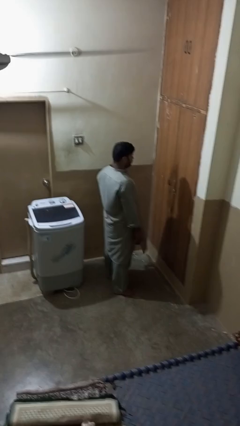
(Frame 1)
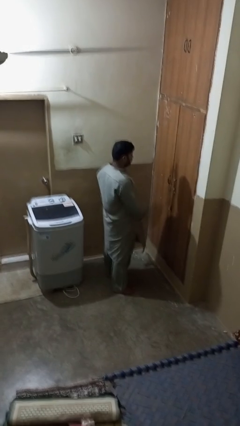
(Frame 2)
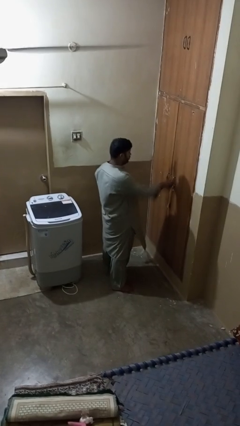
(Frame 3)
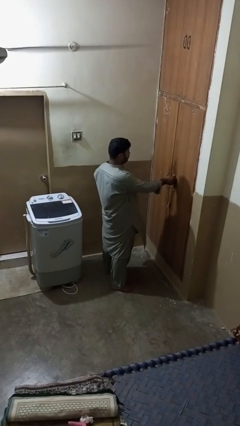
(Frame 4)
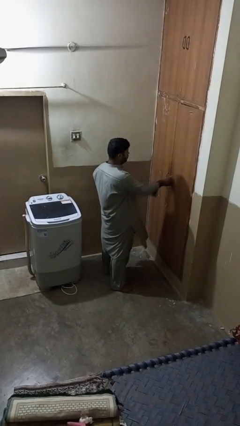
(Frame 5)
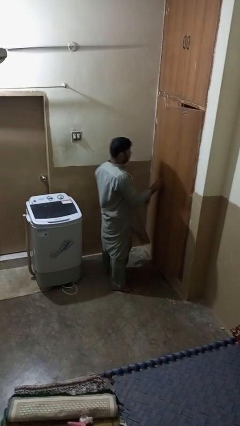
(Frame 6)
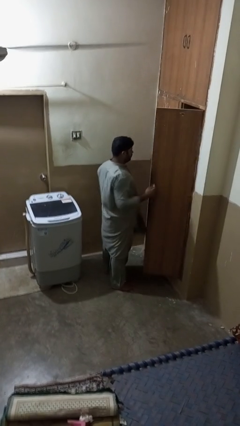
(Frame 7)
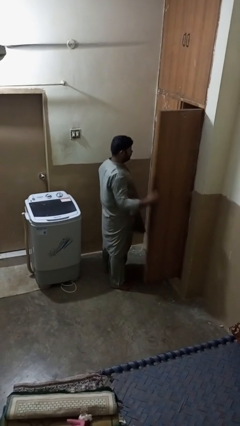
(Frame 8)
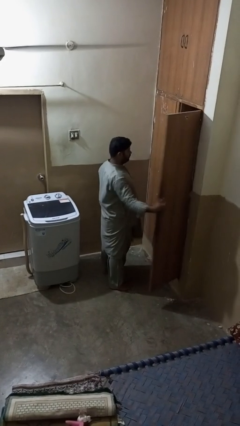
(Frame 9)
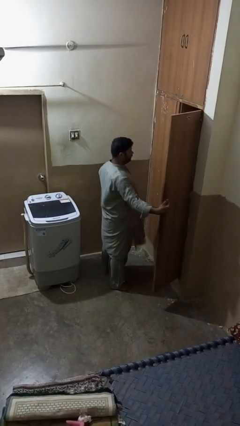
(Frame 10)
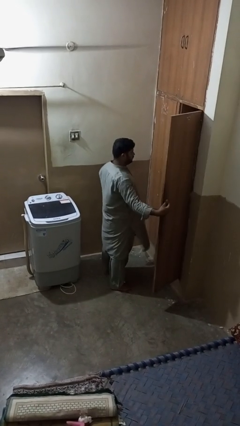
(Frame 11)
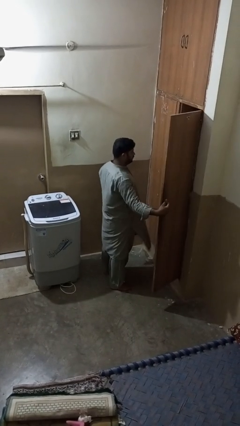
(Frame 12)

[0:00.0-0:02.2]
person opens closet door

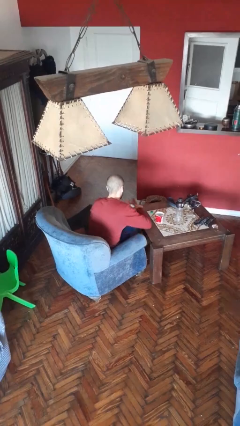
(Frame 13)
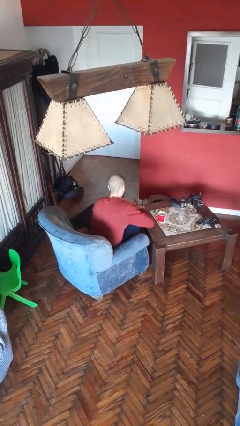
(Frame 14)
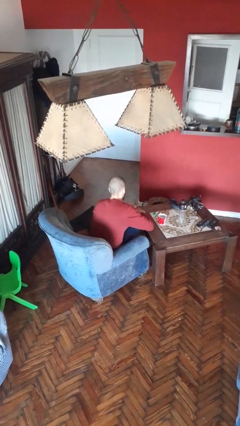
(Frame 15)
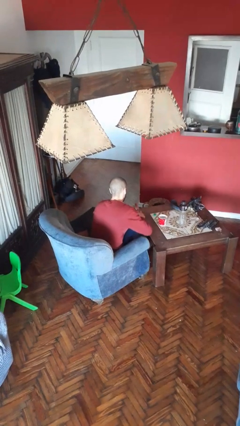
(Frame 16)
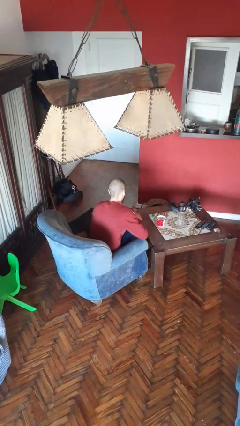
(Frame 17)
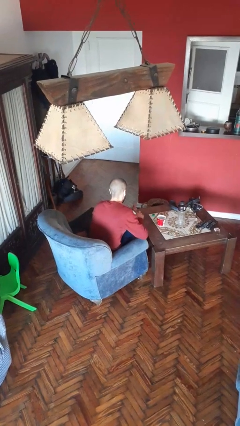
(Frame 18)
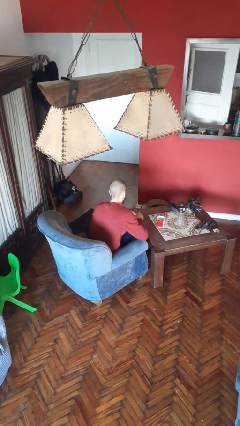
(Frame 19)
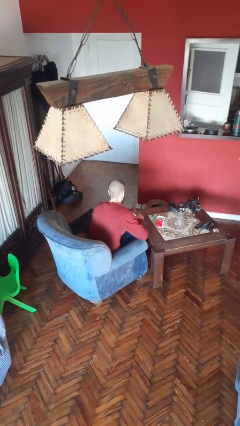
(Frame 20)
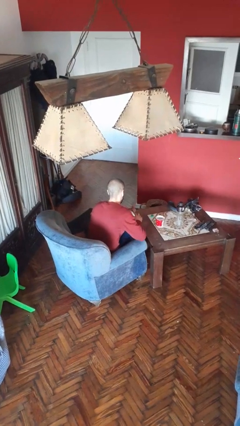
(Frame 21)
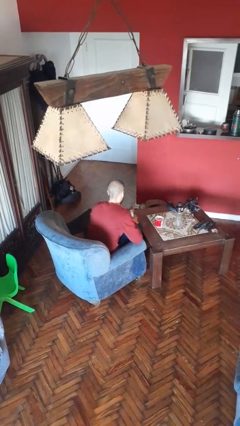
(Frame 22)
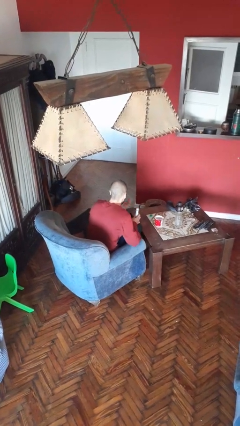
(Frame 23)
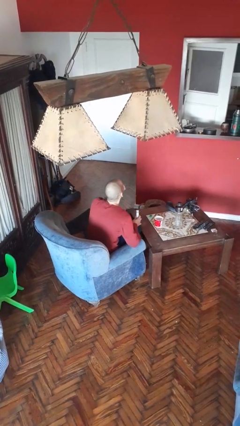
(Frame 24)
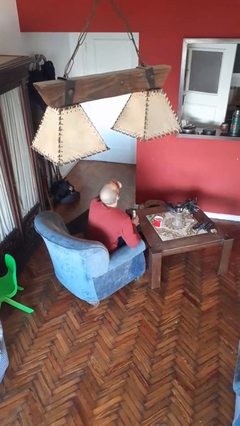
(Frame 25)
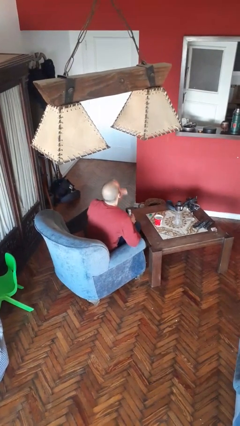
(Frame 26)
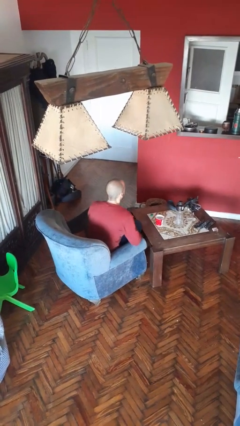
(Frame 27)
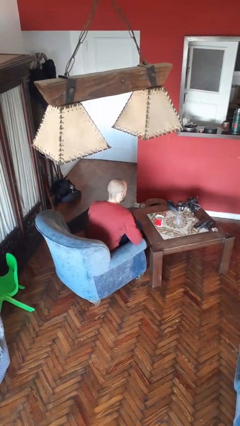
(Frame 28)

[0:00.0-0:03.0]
person takes medicine pills

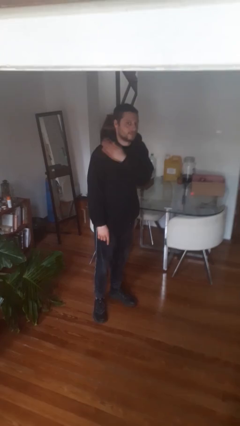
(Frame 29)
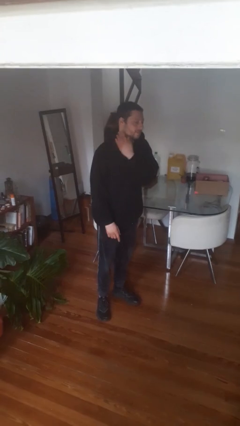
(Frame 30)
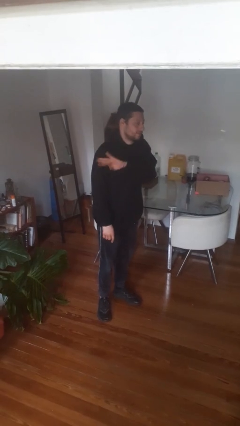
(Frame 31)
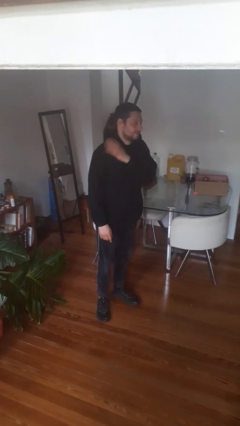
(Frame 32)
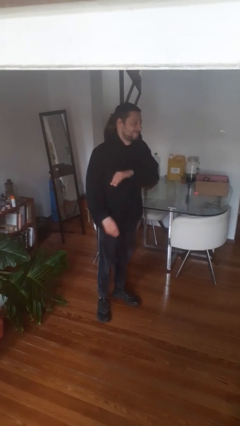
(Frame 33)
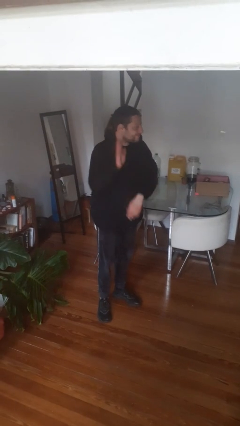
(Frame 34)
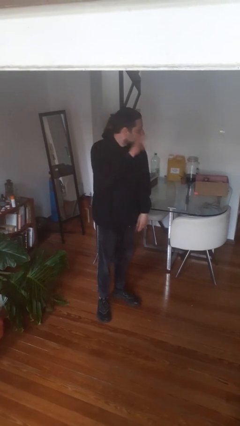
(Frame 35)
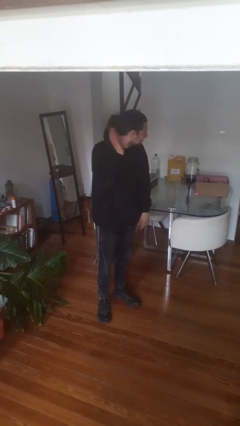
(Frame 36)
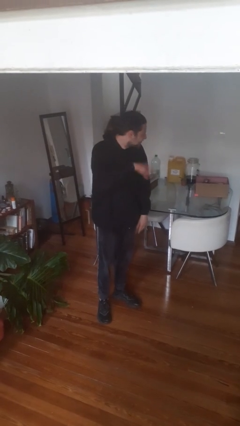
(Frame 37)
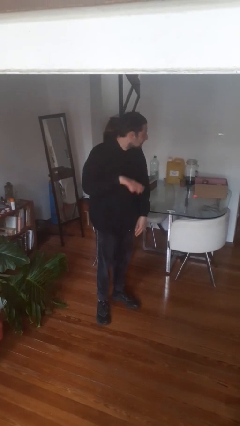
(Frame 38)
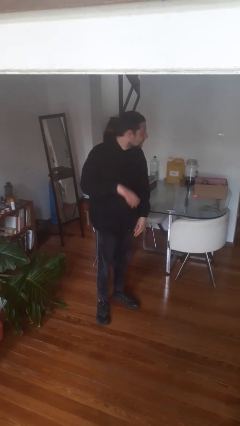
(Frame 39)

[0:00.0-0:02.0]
person swats bug

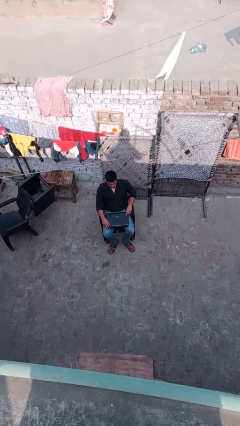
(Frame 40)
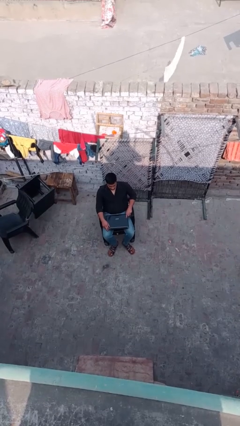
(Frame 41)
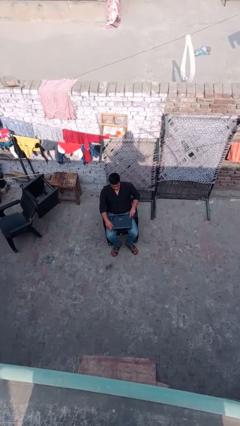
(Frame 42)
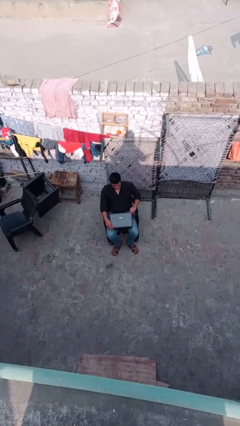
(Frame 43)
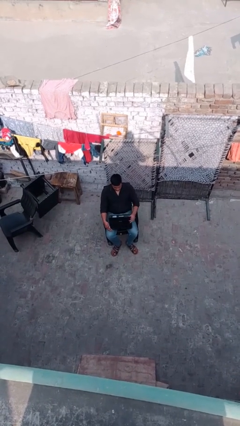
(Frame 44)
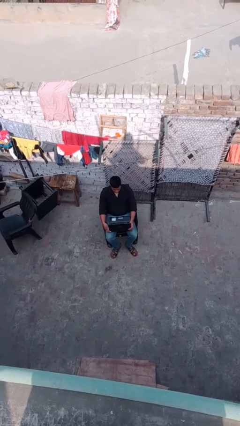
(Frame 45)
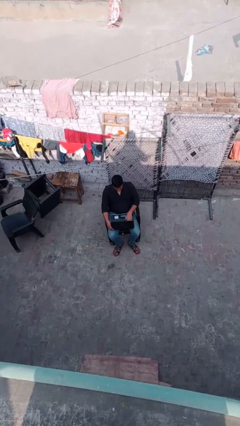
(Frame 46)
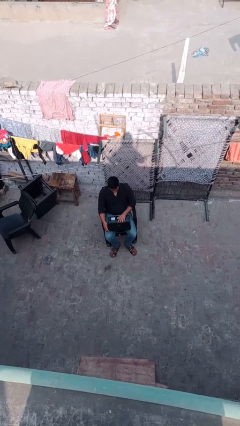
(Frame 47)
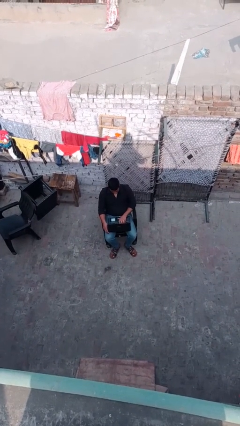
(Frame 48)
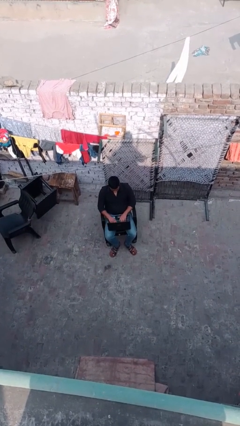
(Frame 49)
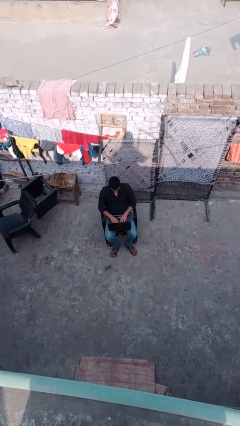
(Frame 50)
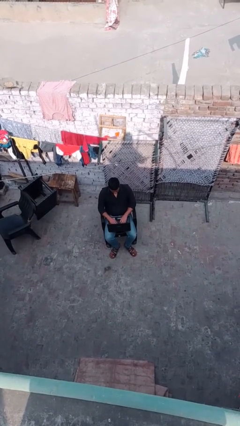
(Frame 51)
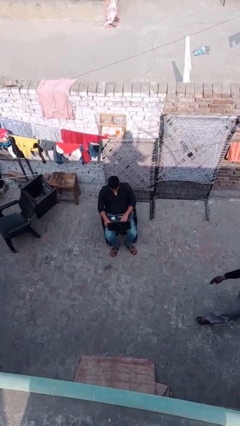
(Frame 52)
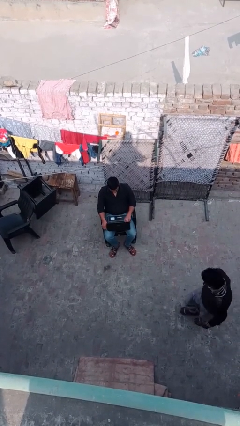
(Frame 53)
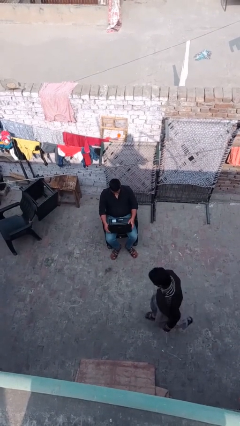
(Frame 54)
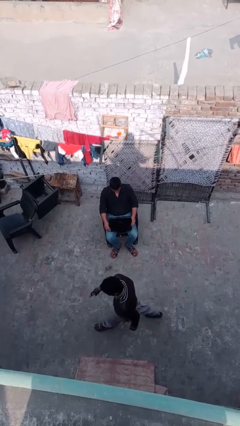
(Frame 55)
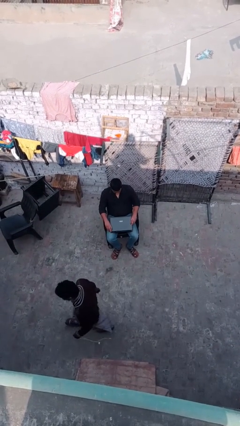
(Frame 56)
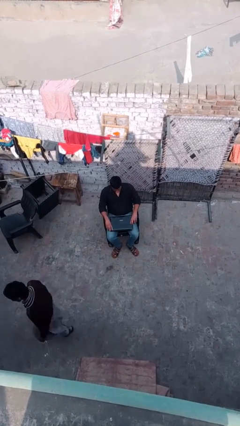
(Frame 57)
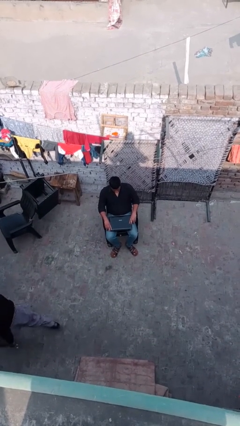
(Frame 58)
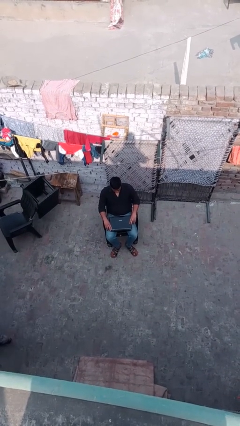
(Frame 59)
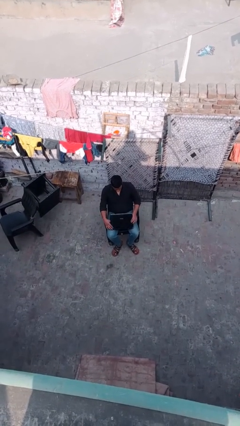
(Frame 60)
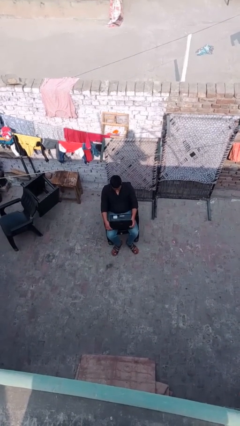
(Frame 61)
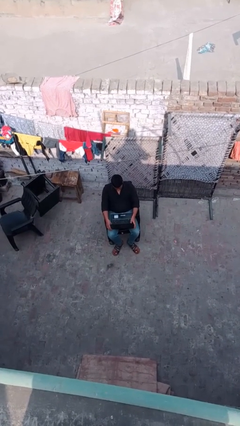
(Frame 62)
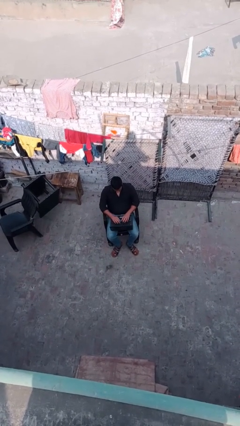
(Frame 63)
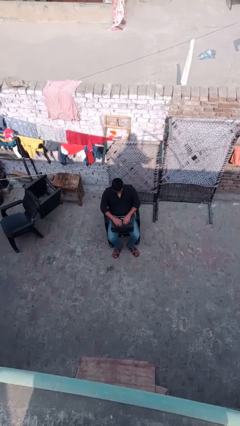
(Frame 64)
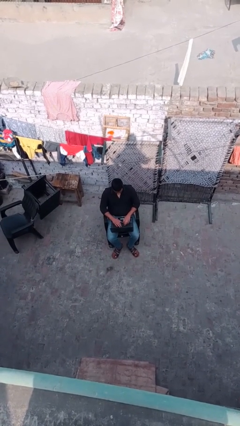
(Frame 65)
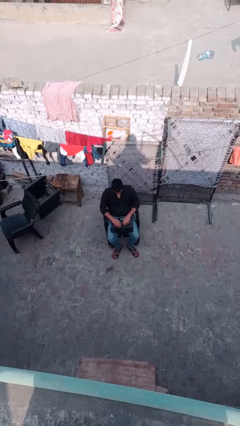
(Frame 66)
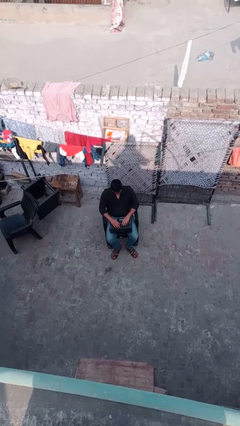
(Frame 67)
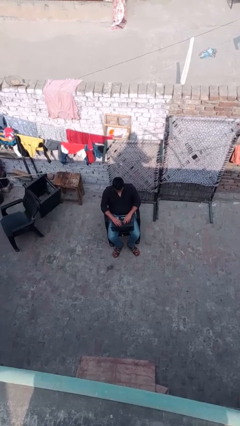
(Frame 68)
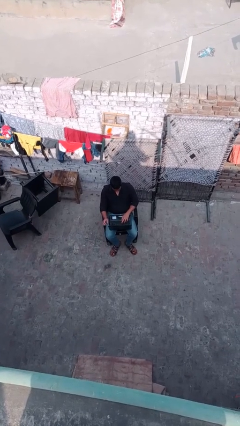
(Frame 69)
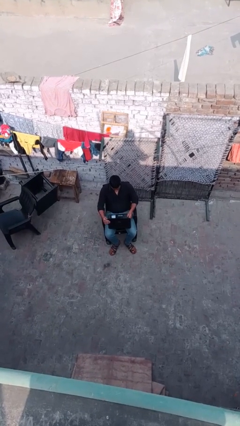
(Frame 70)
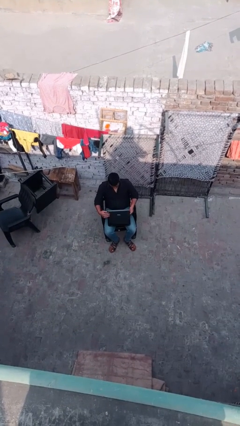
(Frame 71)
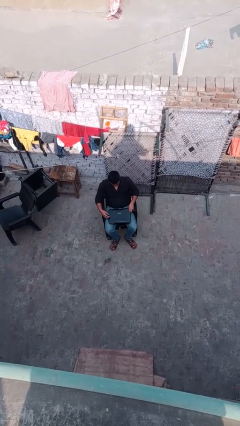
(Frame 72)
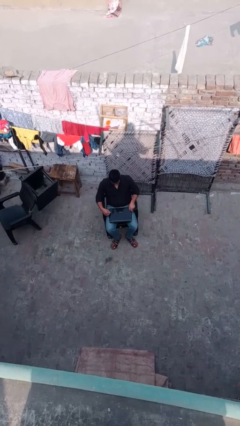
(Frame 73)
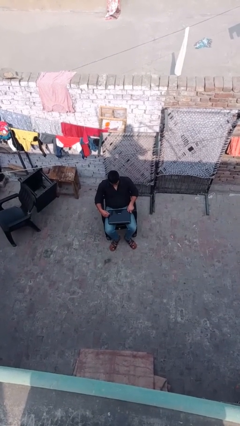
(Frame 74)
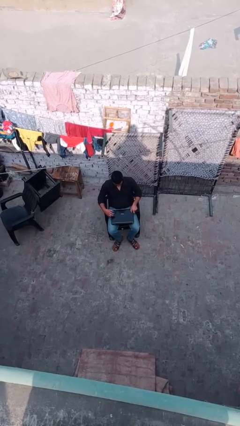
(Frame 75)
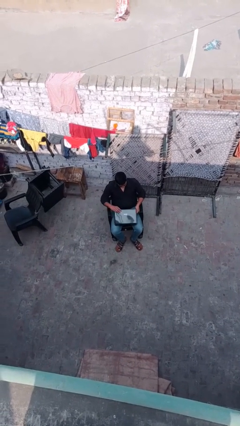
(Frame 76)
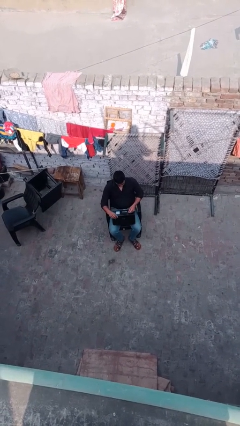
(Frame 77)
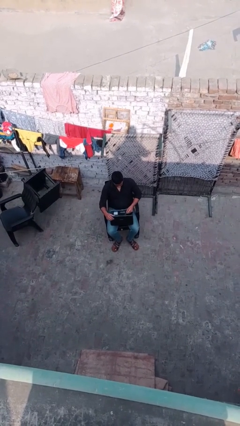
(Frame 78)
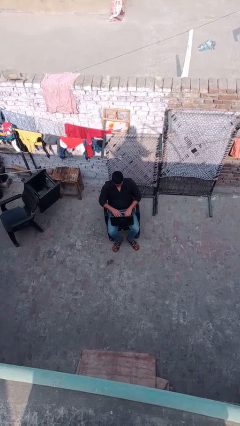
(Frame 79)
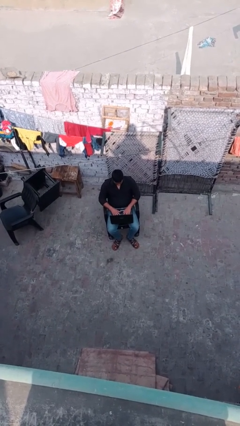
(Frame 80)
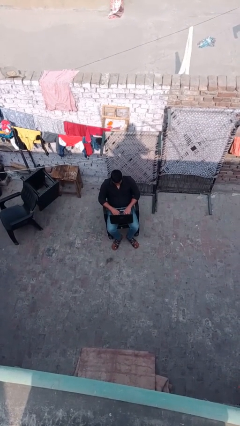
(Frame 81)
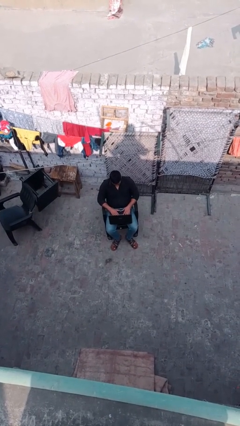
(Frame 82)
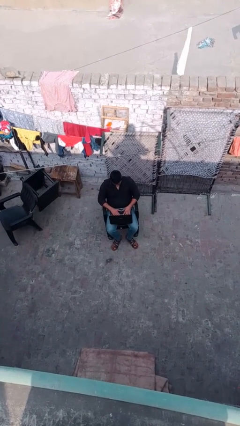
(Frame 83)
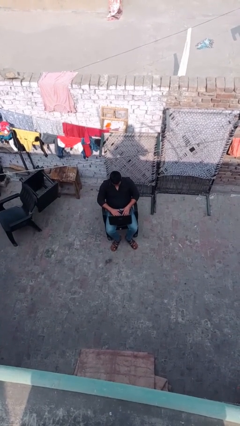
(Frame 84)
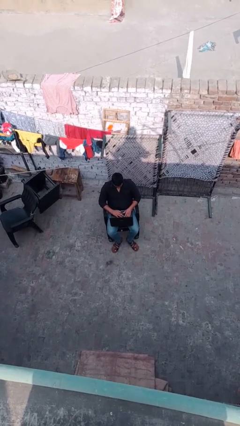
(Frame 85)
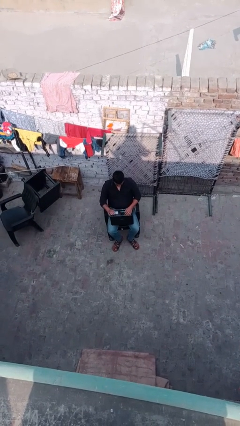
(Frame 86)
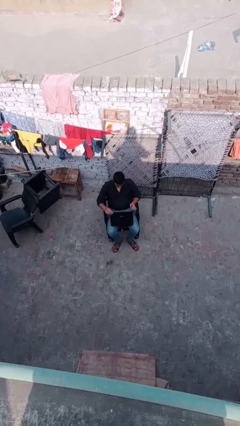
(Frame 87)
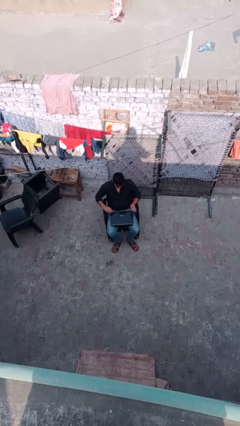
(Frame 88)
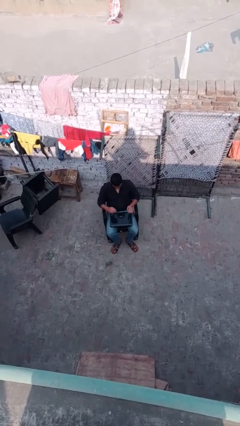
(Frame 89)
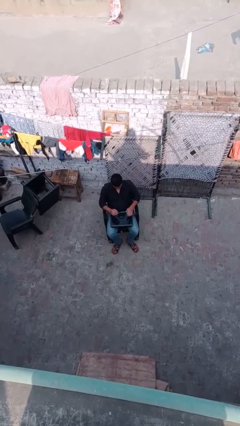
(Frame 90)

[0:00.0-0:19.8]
person interacts with laptop

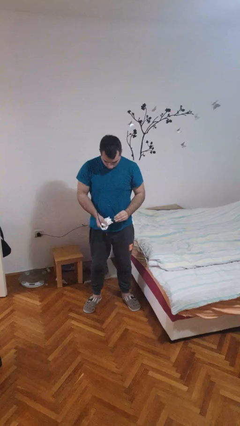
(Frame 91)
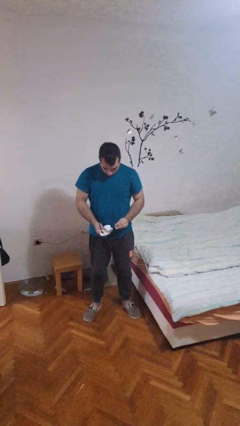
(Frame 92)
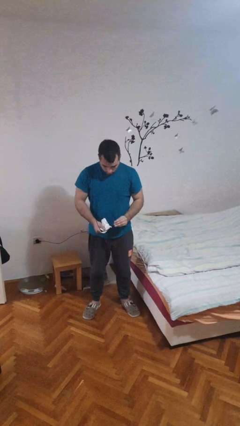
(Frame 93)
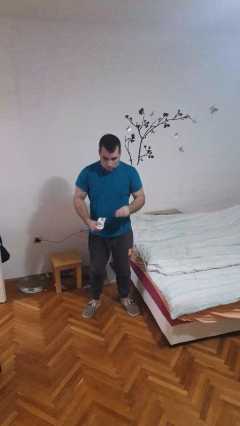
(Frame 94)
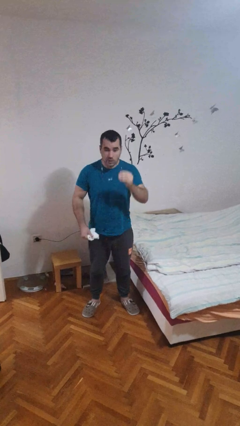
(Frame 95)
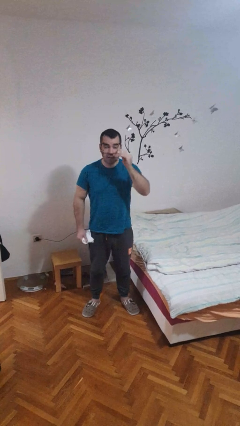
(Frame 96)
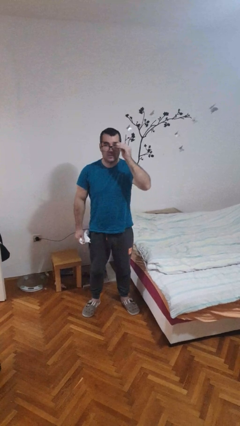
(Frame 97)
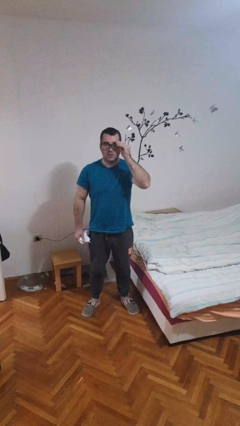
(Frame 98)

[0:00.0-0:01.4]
person cleans eyeglasses
